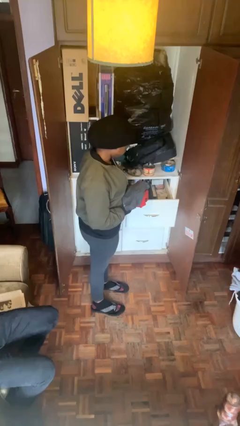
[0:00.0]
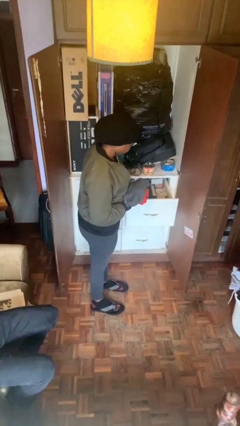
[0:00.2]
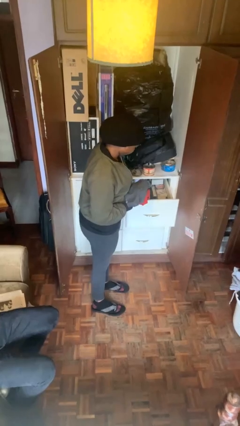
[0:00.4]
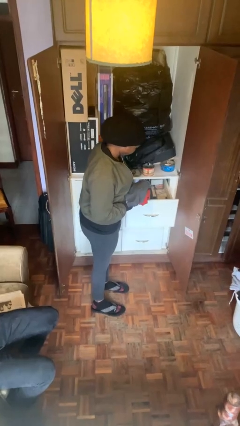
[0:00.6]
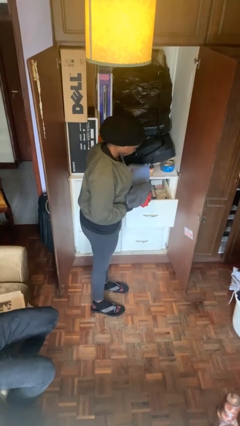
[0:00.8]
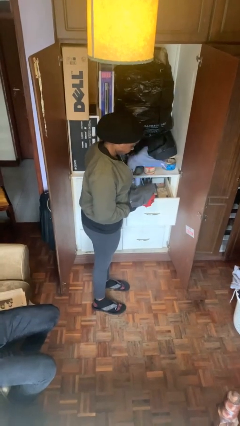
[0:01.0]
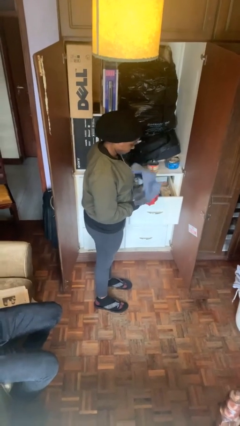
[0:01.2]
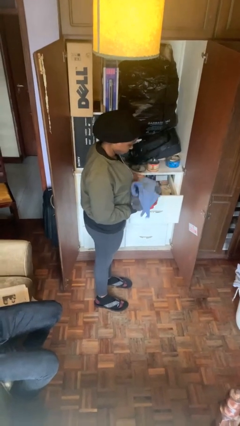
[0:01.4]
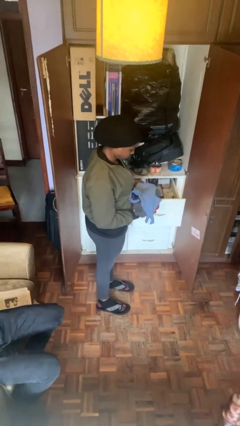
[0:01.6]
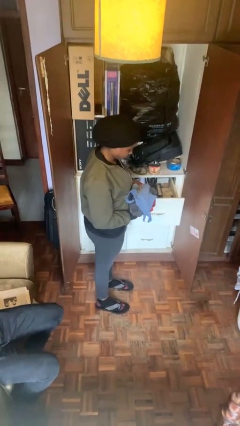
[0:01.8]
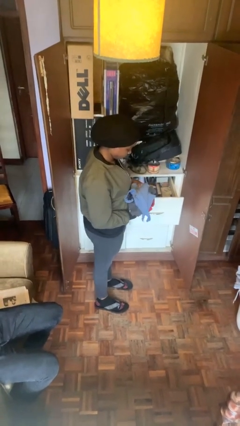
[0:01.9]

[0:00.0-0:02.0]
person takes clothes from dresser

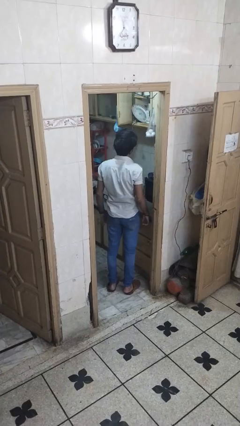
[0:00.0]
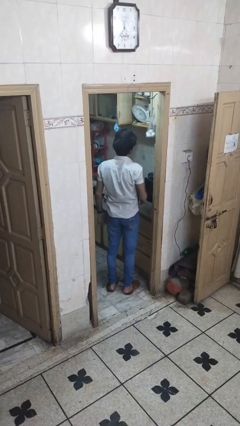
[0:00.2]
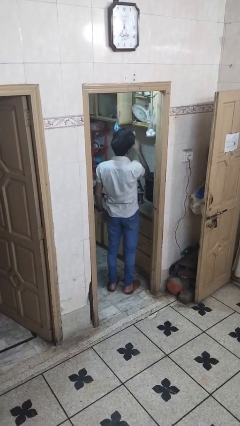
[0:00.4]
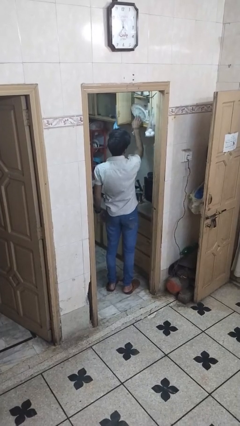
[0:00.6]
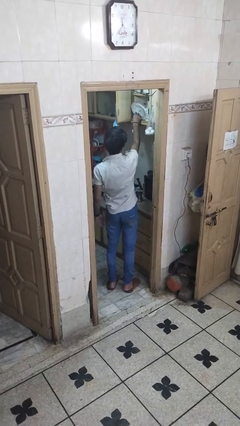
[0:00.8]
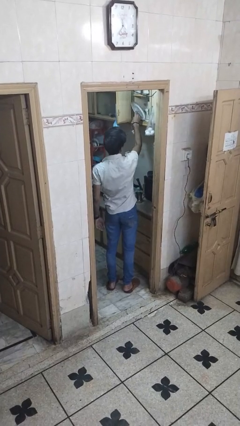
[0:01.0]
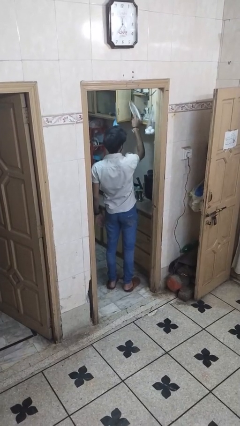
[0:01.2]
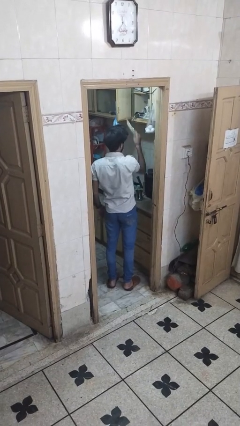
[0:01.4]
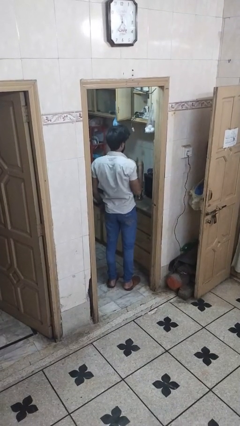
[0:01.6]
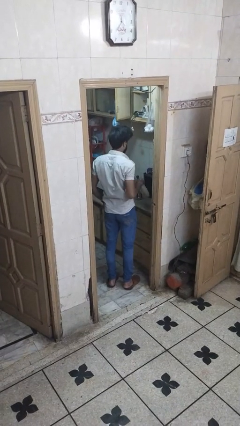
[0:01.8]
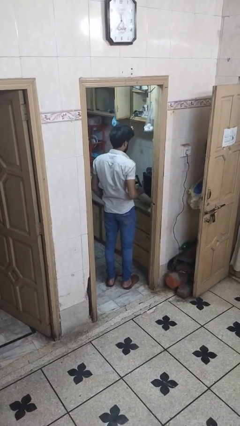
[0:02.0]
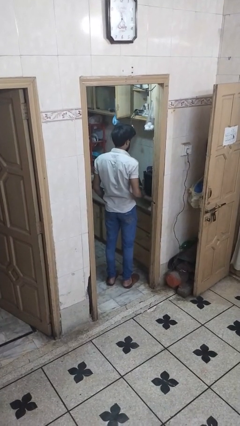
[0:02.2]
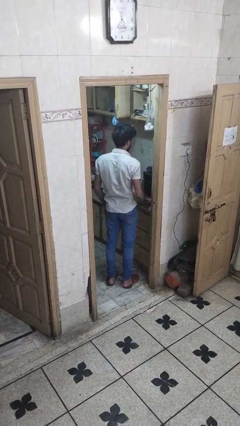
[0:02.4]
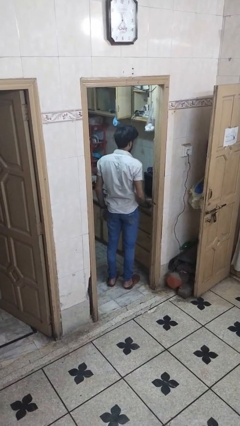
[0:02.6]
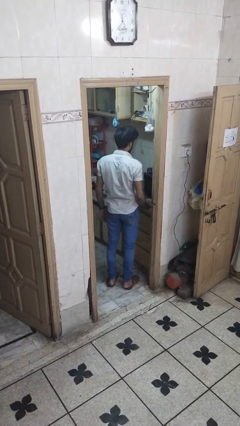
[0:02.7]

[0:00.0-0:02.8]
person takes object from cabinet

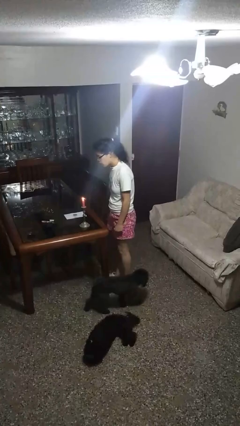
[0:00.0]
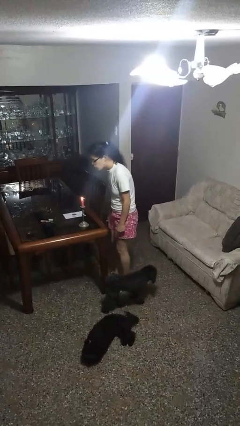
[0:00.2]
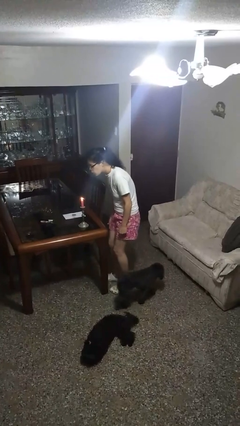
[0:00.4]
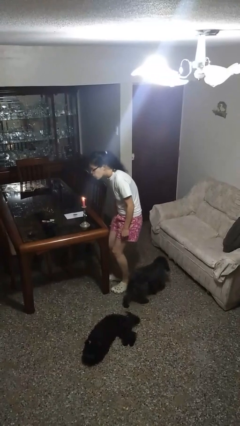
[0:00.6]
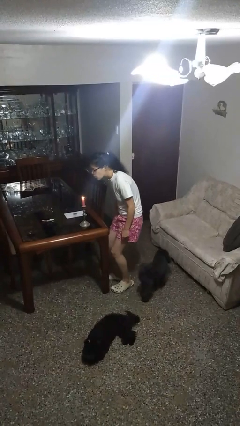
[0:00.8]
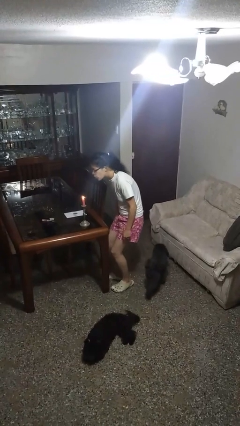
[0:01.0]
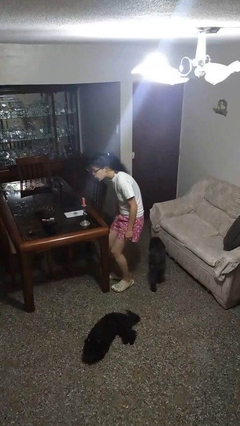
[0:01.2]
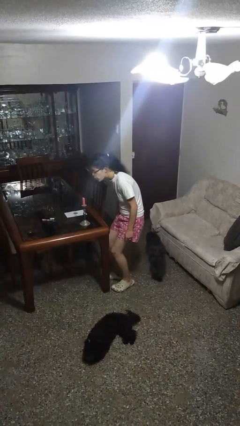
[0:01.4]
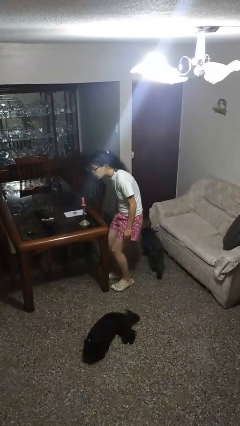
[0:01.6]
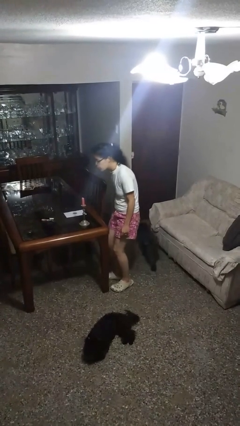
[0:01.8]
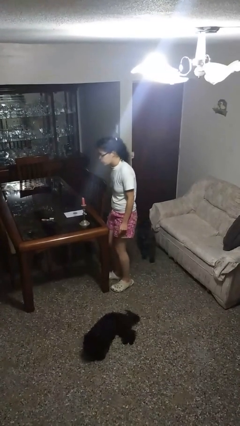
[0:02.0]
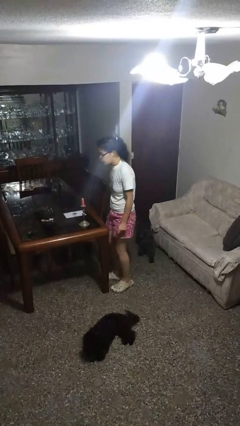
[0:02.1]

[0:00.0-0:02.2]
person extinguishes candle

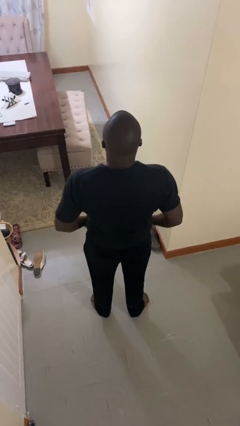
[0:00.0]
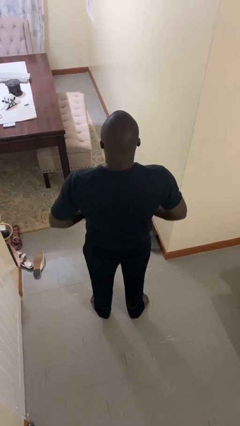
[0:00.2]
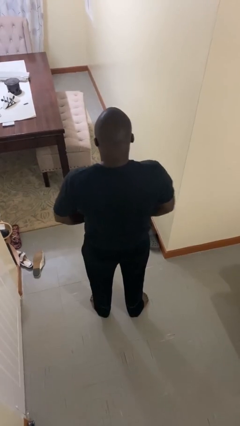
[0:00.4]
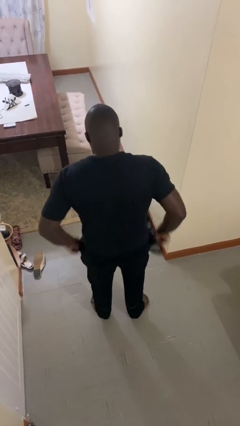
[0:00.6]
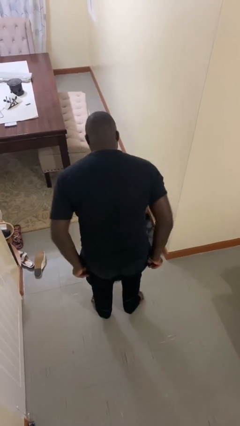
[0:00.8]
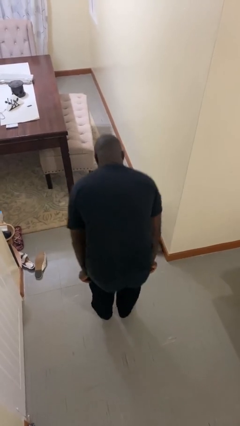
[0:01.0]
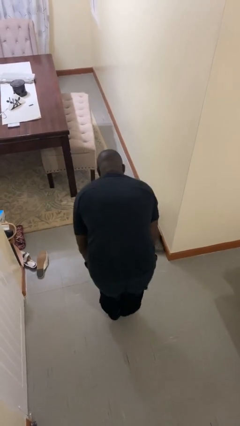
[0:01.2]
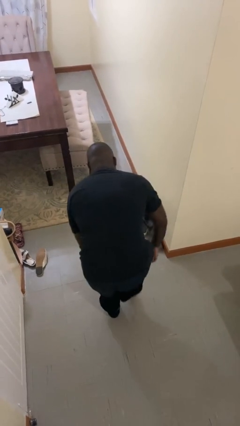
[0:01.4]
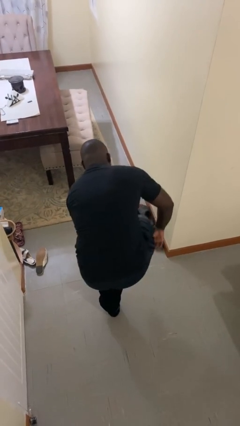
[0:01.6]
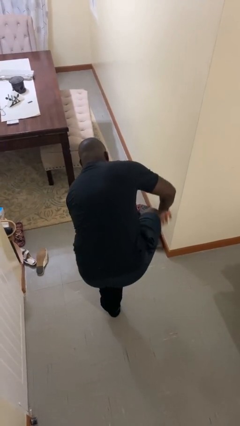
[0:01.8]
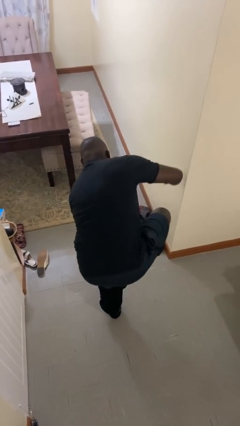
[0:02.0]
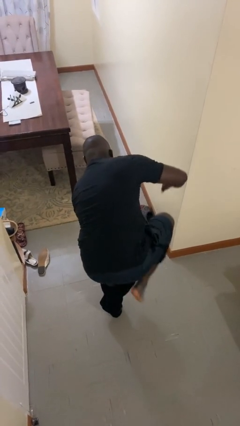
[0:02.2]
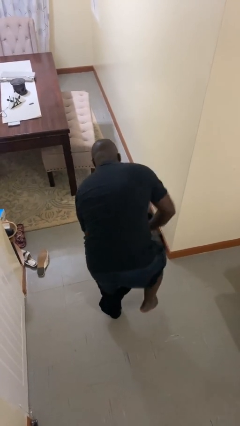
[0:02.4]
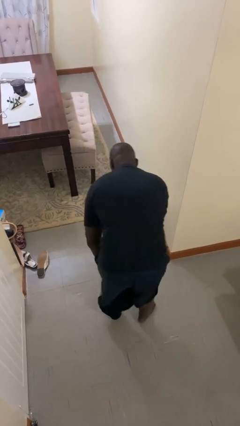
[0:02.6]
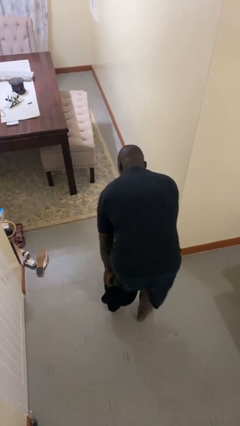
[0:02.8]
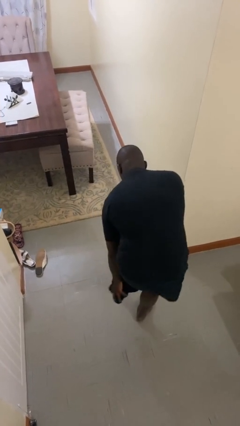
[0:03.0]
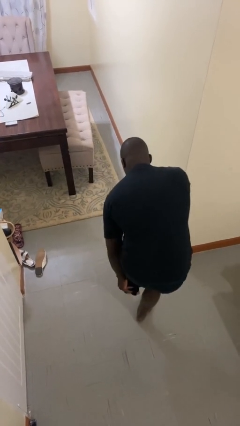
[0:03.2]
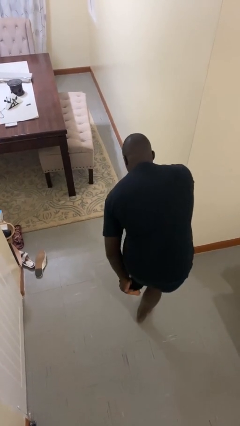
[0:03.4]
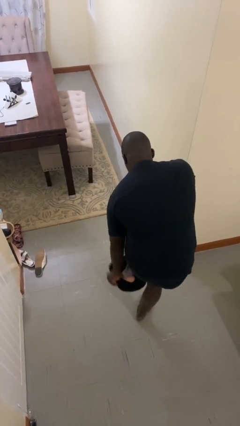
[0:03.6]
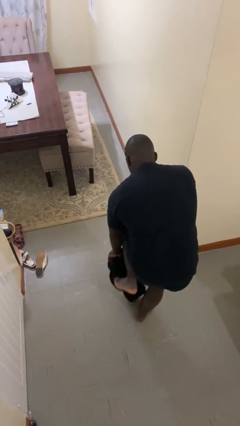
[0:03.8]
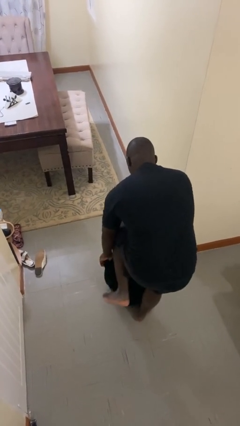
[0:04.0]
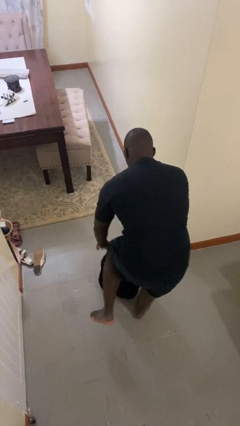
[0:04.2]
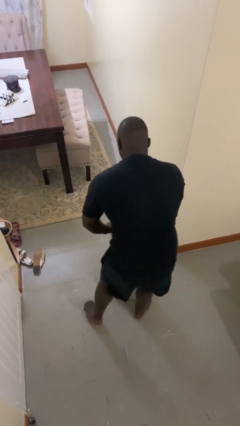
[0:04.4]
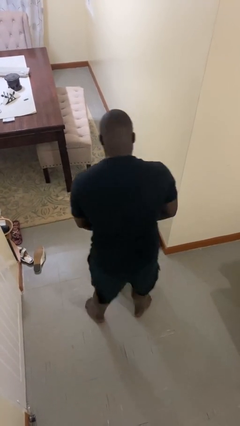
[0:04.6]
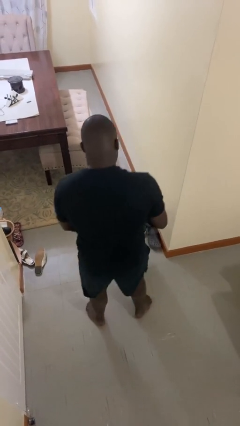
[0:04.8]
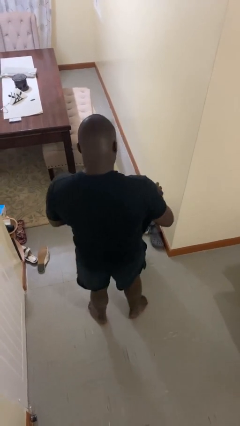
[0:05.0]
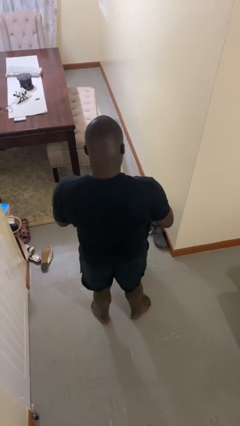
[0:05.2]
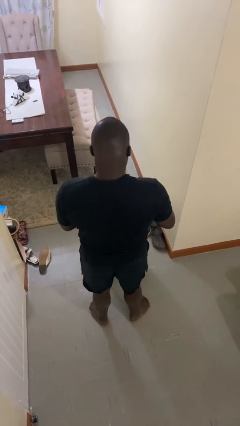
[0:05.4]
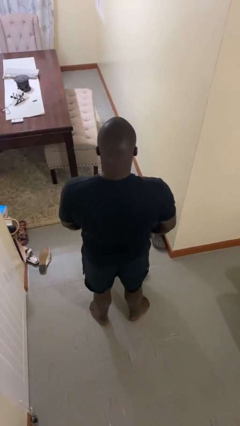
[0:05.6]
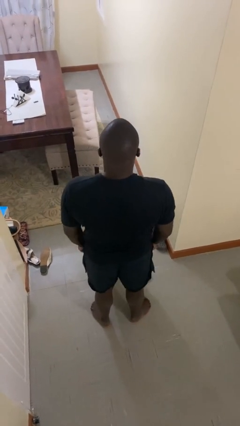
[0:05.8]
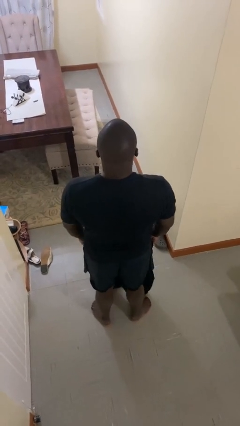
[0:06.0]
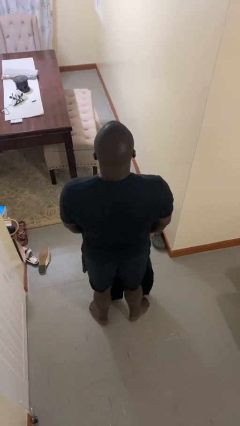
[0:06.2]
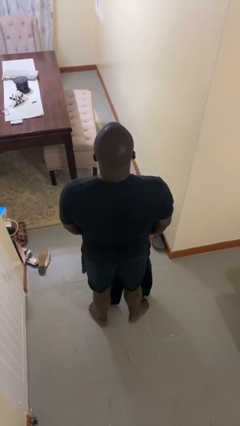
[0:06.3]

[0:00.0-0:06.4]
person puts on pants

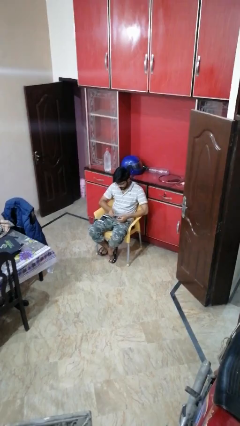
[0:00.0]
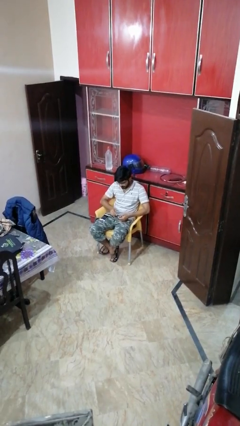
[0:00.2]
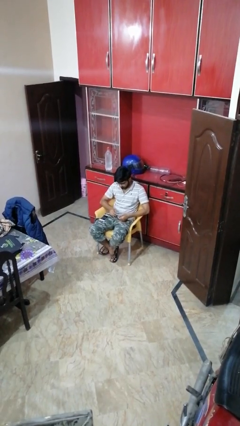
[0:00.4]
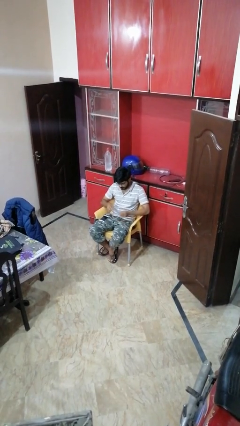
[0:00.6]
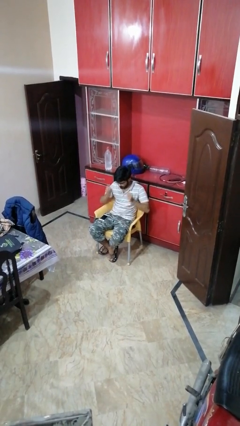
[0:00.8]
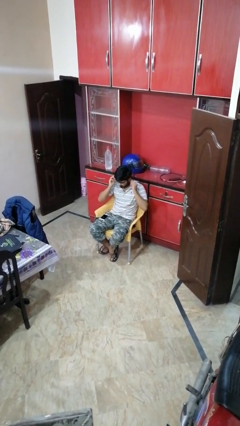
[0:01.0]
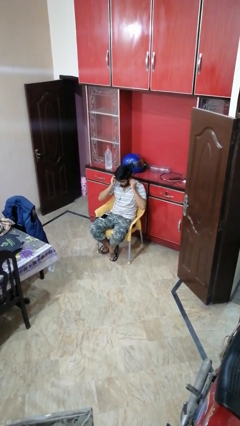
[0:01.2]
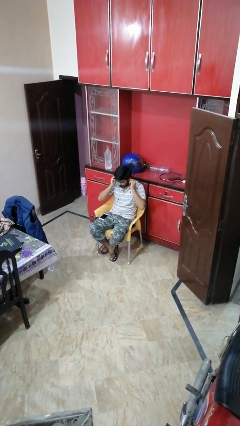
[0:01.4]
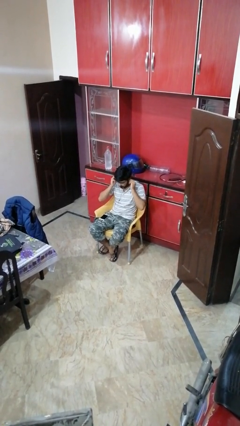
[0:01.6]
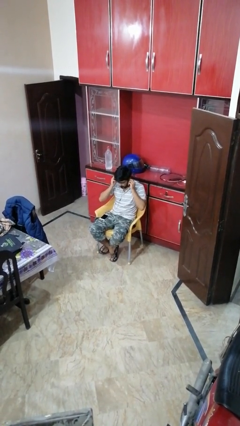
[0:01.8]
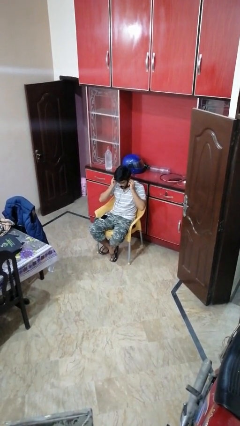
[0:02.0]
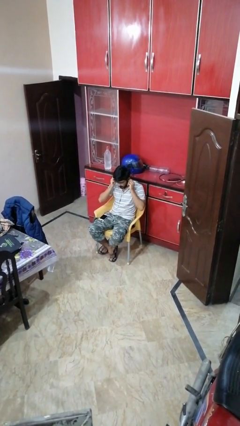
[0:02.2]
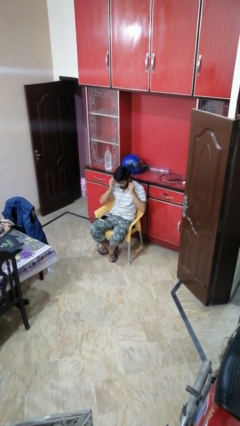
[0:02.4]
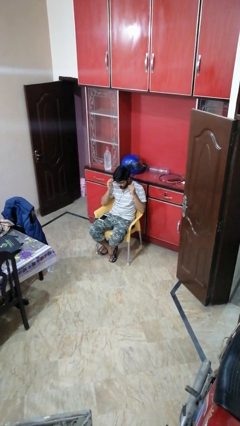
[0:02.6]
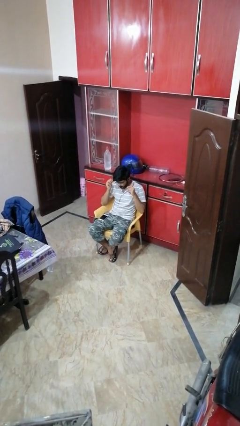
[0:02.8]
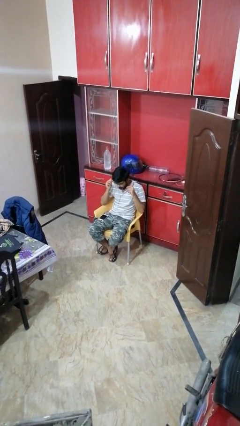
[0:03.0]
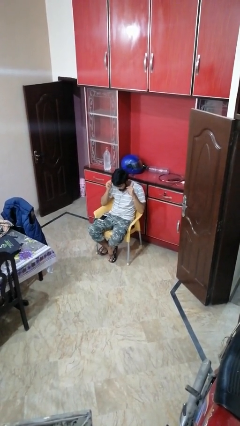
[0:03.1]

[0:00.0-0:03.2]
person puts on headphones

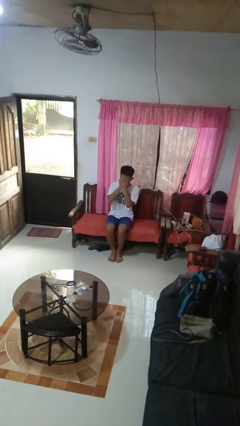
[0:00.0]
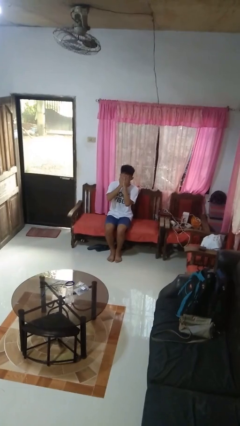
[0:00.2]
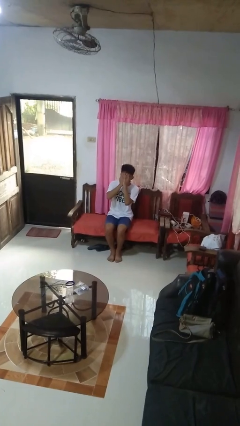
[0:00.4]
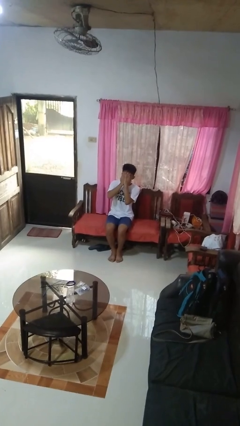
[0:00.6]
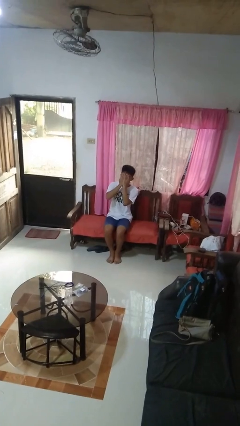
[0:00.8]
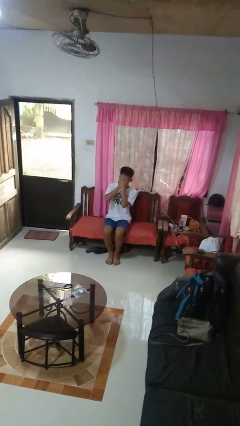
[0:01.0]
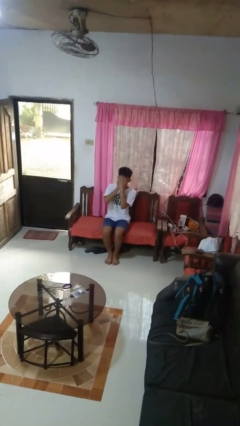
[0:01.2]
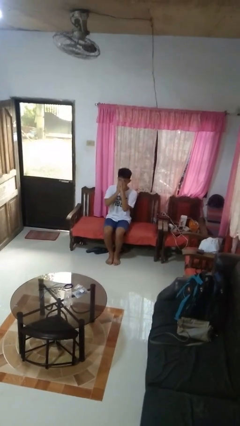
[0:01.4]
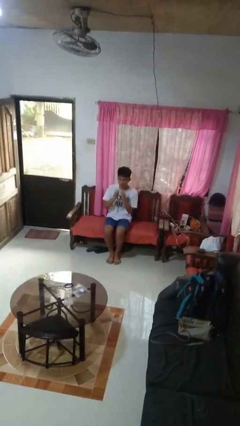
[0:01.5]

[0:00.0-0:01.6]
person covers face with hands
